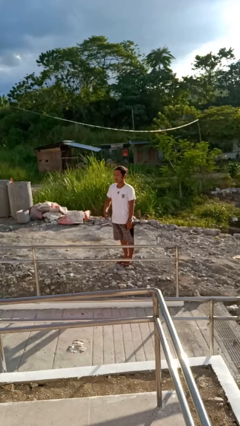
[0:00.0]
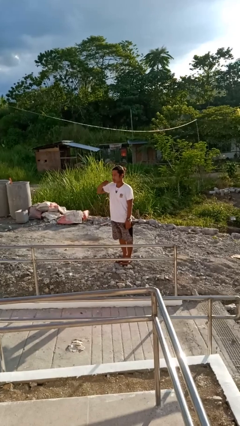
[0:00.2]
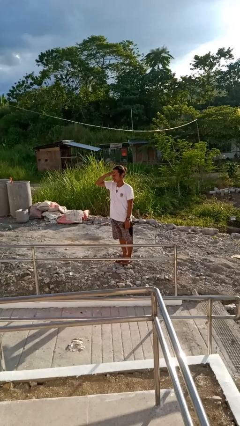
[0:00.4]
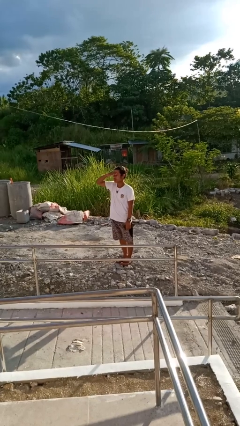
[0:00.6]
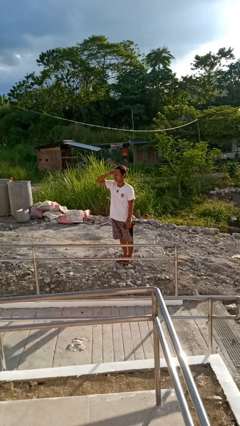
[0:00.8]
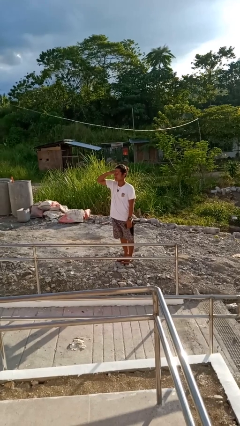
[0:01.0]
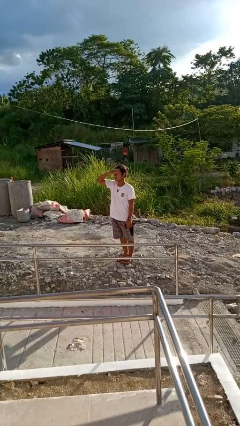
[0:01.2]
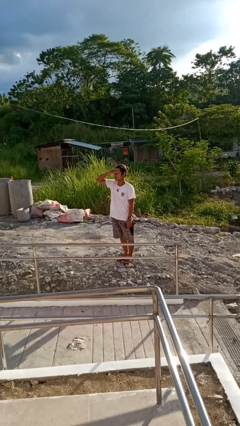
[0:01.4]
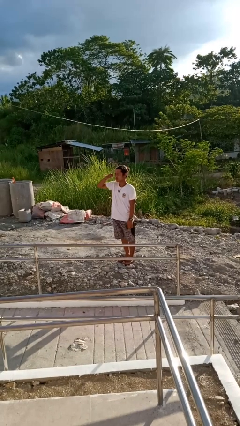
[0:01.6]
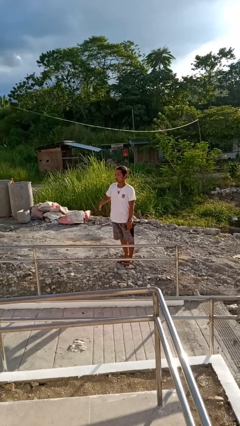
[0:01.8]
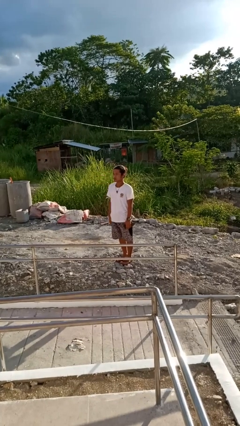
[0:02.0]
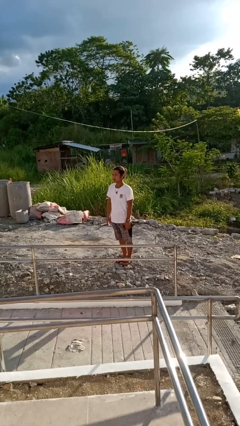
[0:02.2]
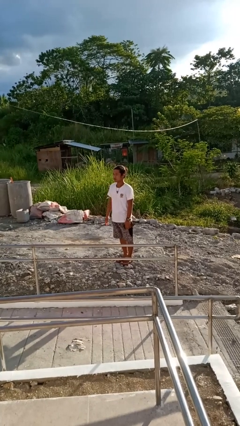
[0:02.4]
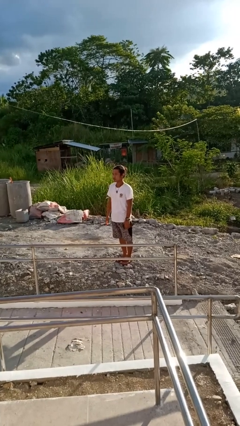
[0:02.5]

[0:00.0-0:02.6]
person shades eyes

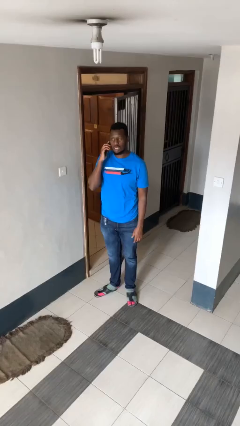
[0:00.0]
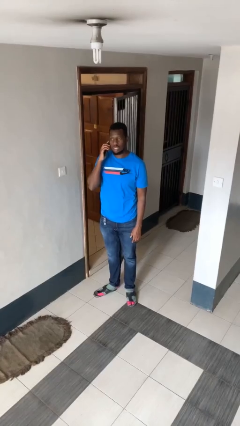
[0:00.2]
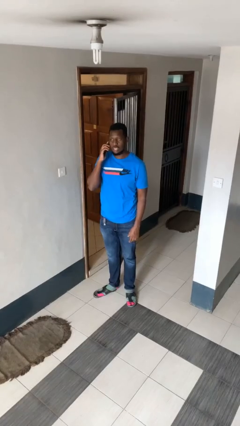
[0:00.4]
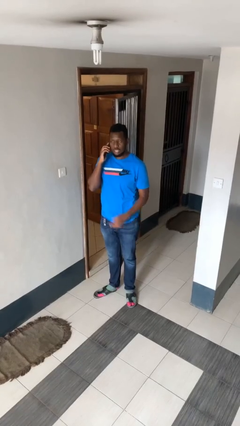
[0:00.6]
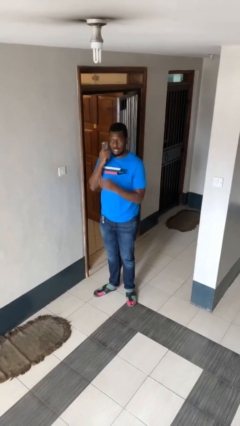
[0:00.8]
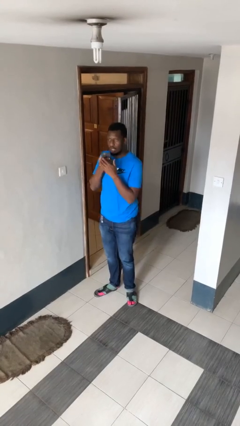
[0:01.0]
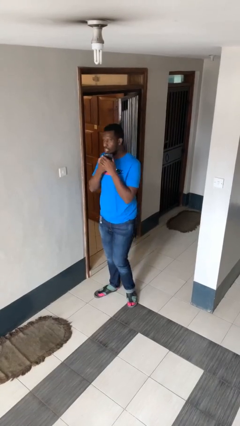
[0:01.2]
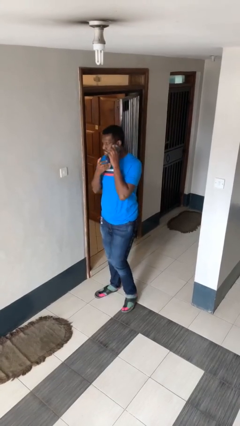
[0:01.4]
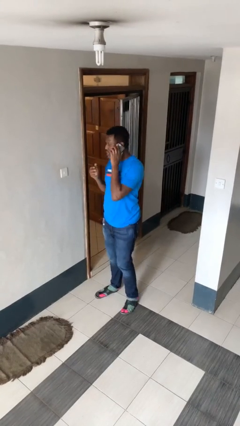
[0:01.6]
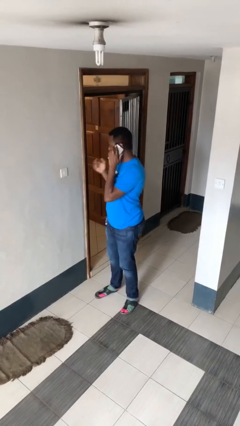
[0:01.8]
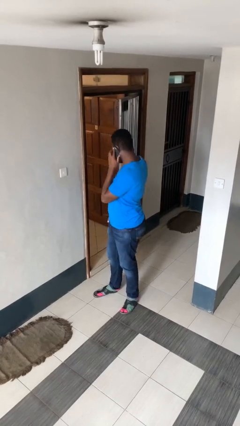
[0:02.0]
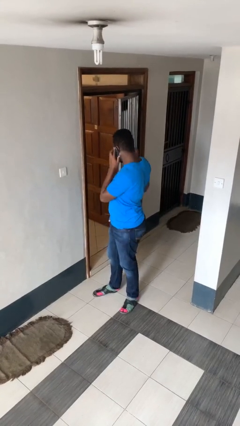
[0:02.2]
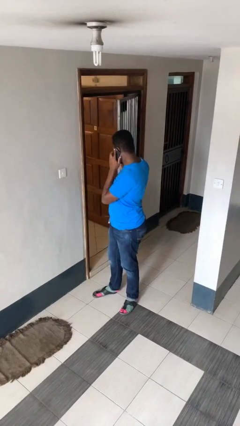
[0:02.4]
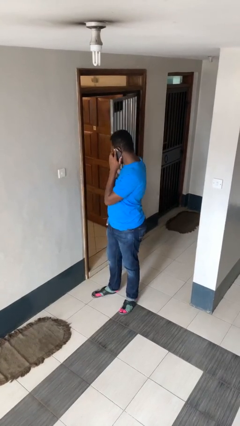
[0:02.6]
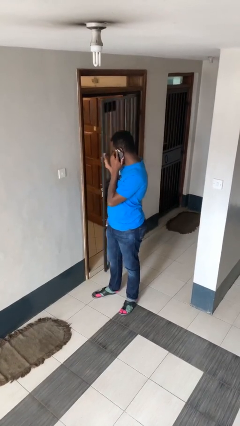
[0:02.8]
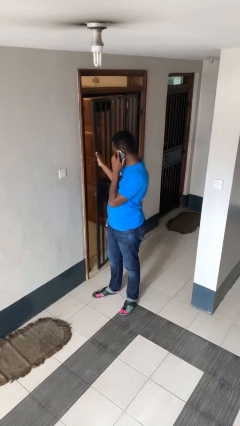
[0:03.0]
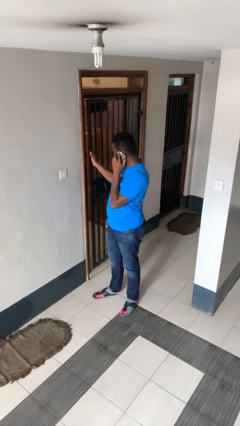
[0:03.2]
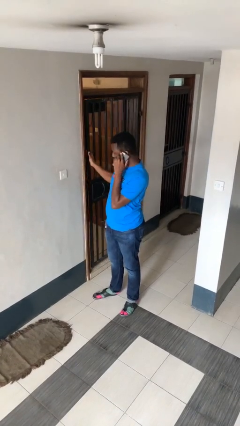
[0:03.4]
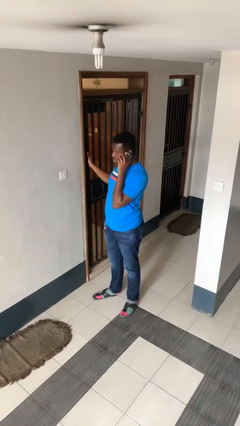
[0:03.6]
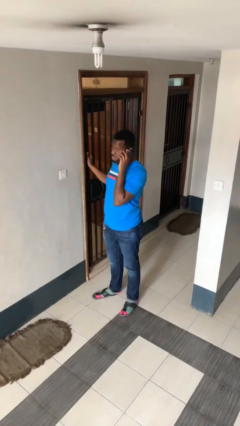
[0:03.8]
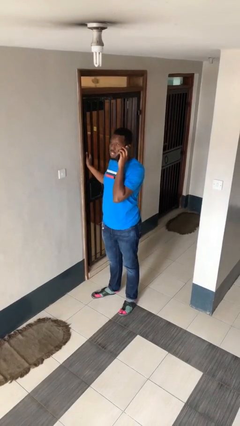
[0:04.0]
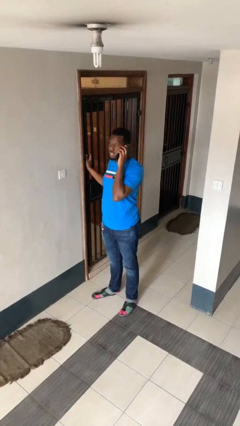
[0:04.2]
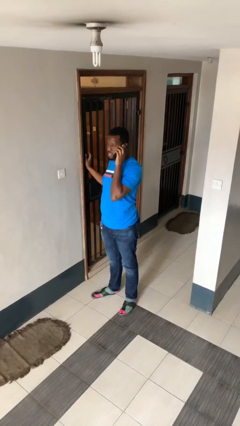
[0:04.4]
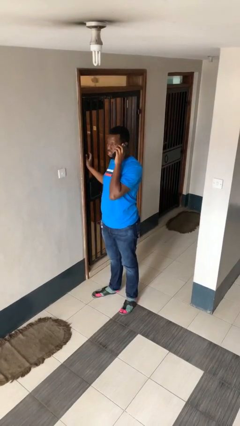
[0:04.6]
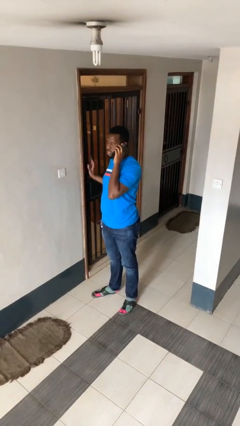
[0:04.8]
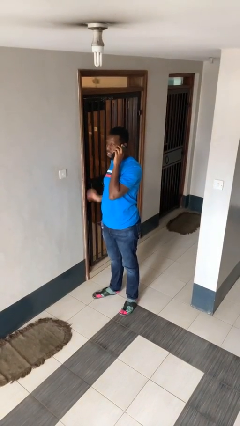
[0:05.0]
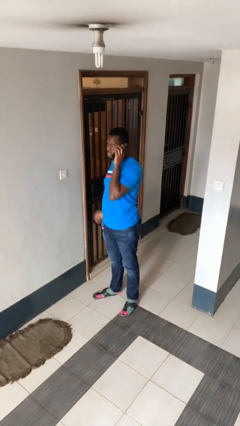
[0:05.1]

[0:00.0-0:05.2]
person closes facility door

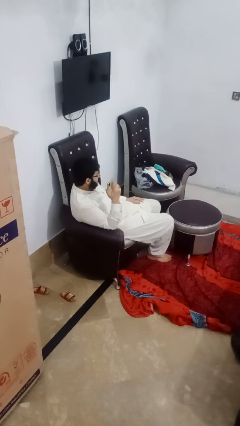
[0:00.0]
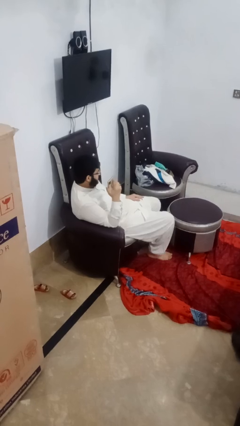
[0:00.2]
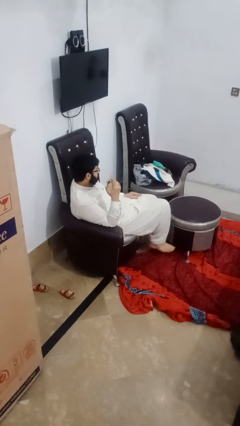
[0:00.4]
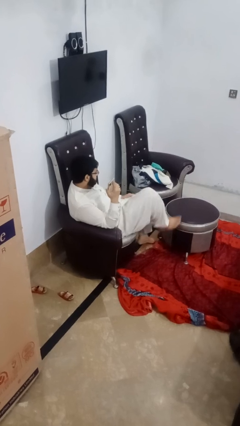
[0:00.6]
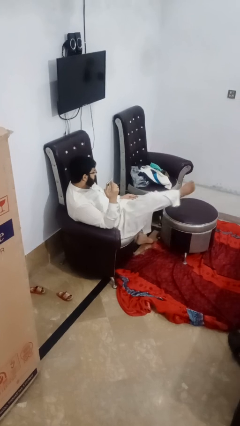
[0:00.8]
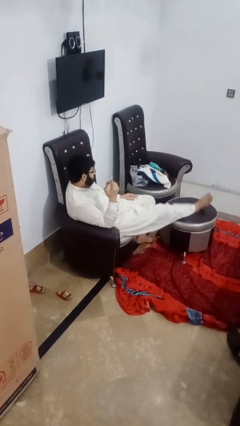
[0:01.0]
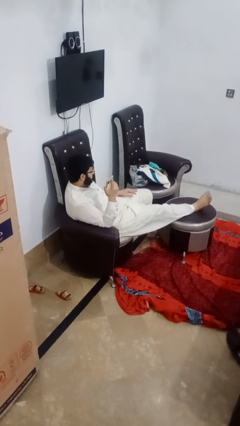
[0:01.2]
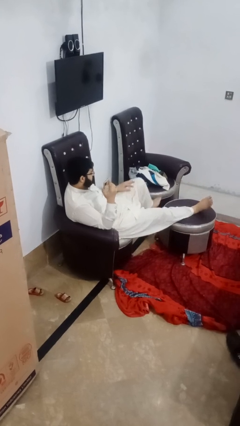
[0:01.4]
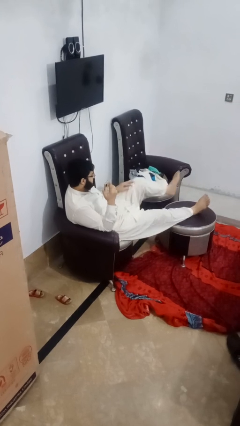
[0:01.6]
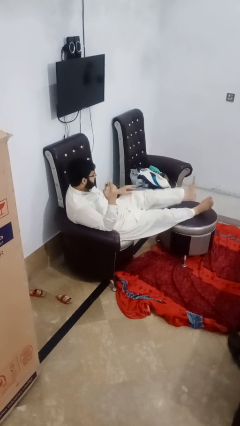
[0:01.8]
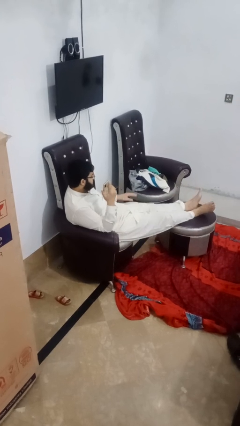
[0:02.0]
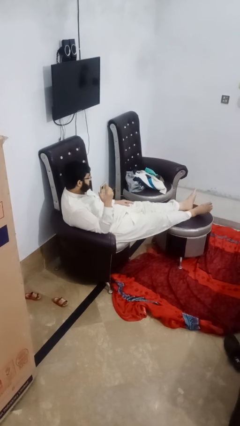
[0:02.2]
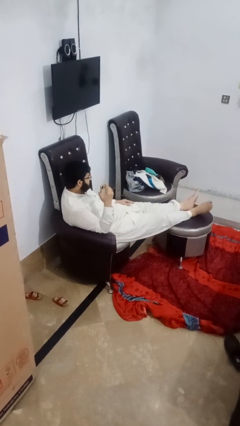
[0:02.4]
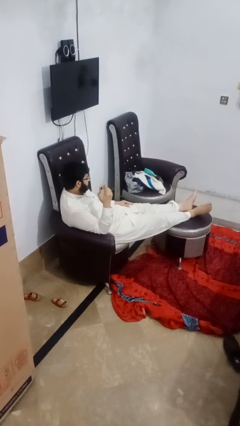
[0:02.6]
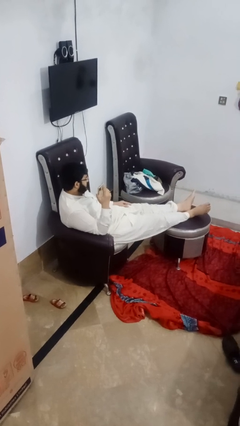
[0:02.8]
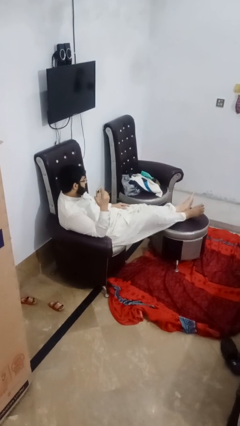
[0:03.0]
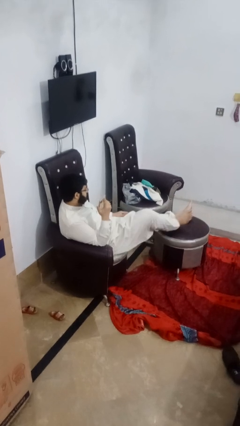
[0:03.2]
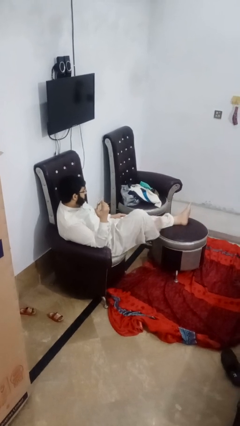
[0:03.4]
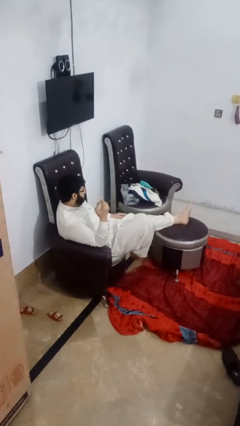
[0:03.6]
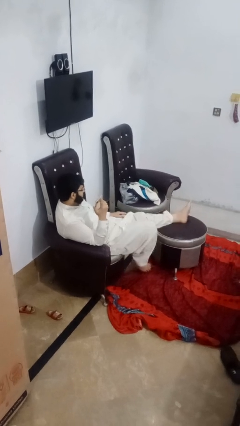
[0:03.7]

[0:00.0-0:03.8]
person puts feet up

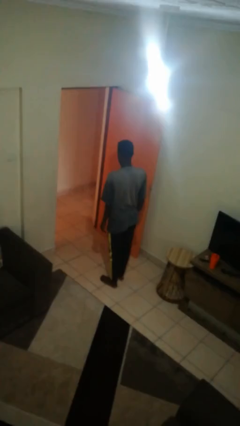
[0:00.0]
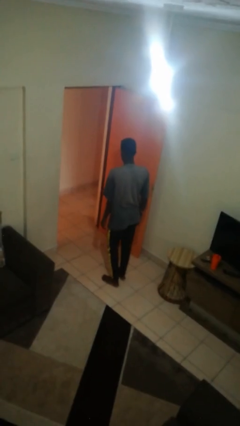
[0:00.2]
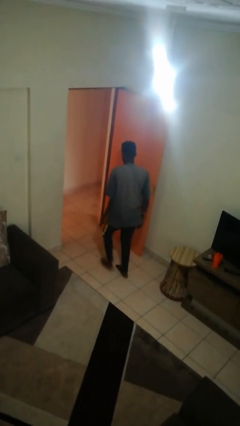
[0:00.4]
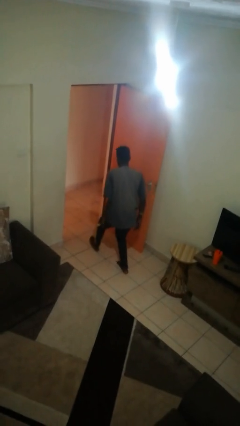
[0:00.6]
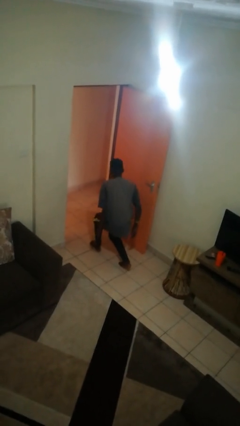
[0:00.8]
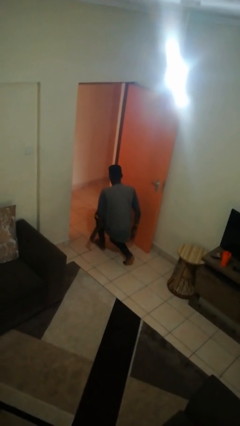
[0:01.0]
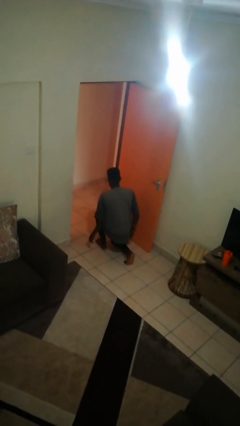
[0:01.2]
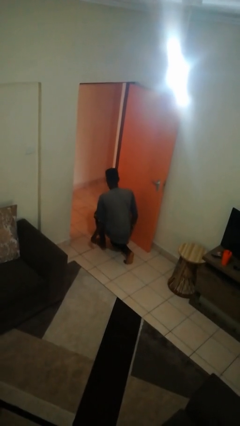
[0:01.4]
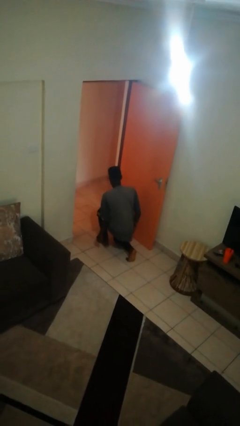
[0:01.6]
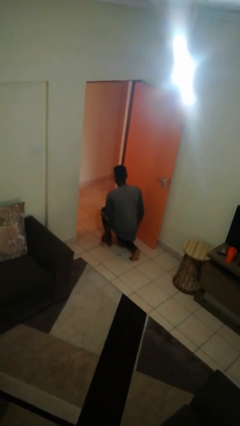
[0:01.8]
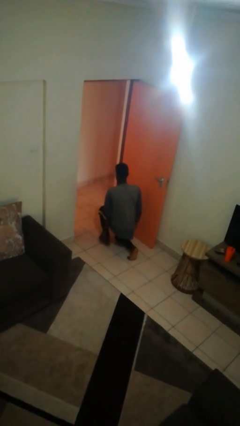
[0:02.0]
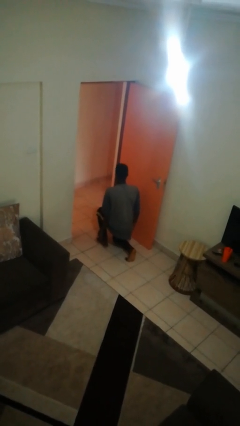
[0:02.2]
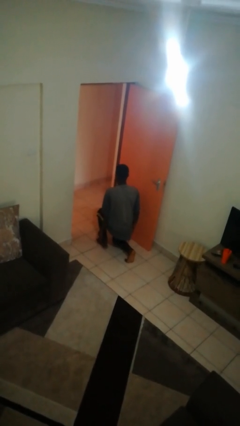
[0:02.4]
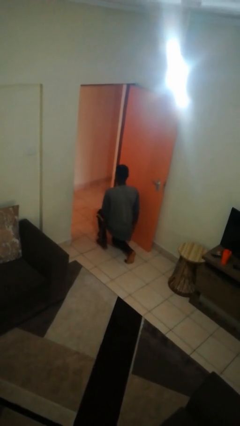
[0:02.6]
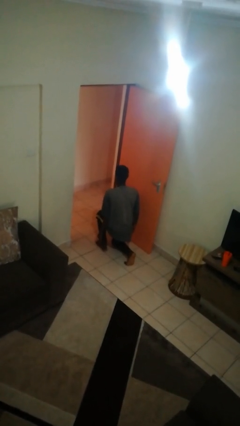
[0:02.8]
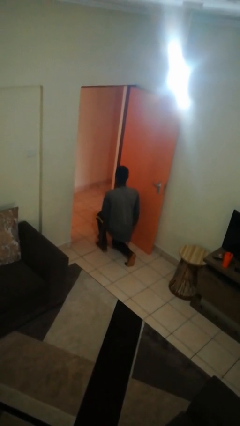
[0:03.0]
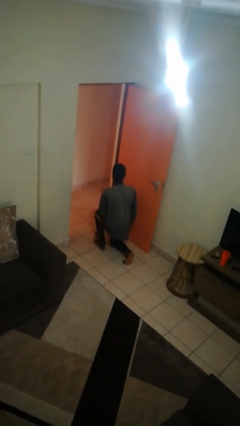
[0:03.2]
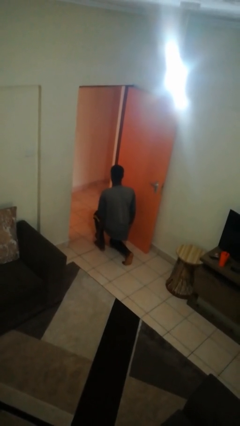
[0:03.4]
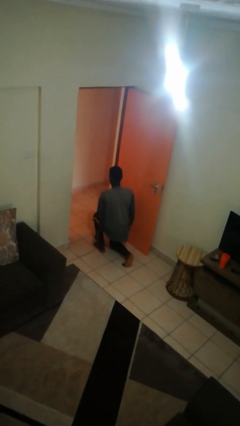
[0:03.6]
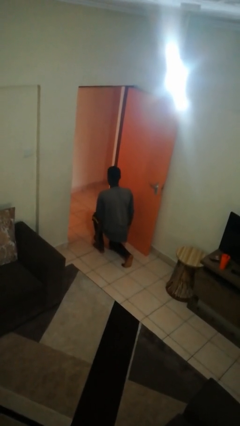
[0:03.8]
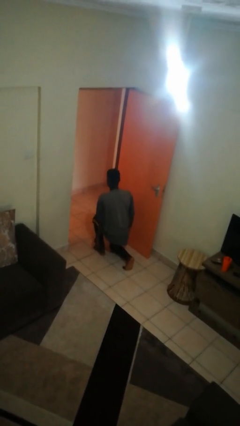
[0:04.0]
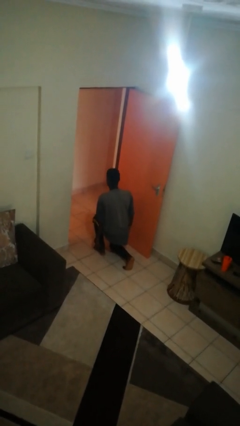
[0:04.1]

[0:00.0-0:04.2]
person kneels

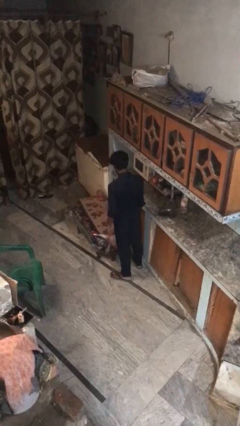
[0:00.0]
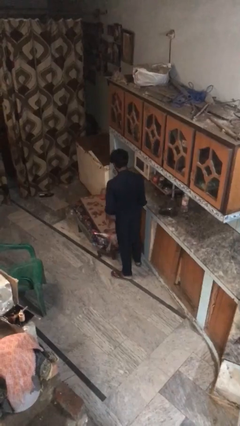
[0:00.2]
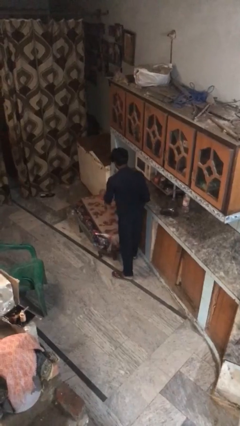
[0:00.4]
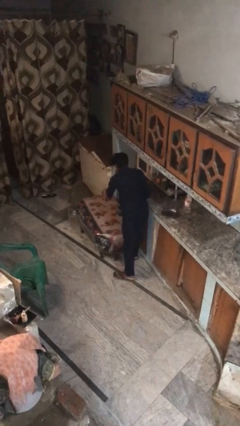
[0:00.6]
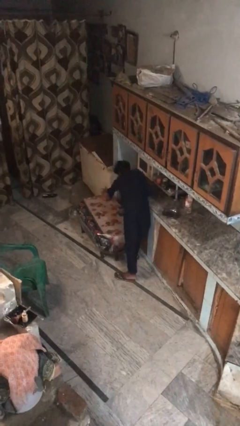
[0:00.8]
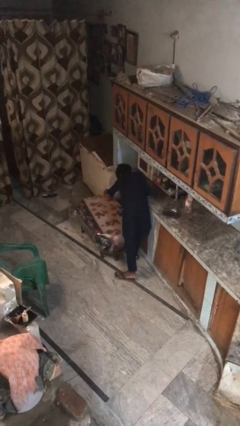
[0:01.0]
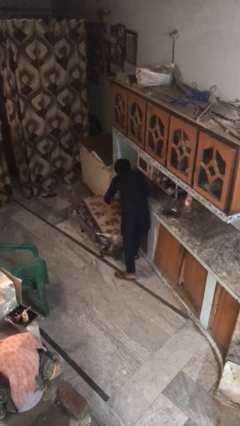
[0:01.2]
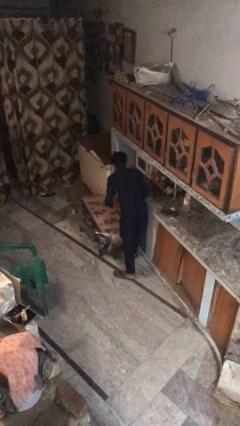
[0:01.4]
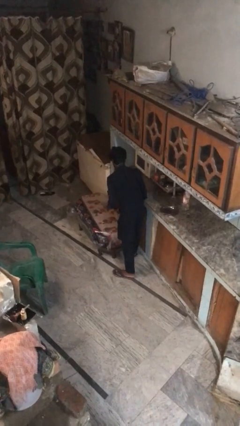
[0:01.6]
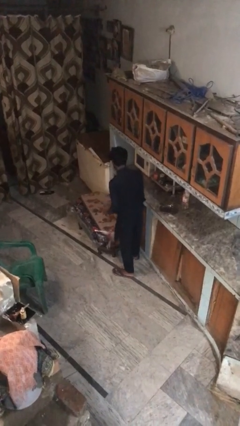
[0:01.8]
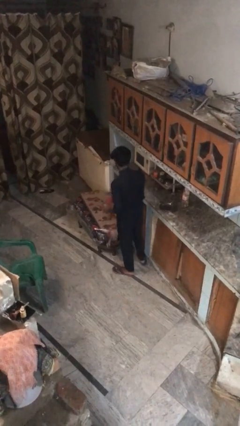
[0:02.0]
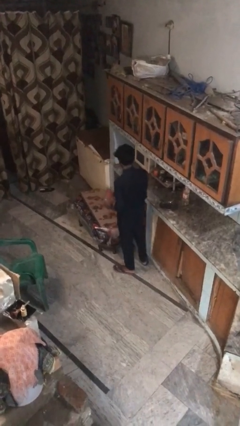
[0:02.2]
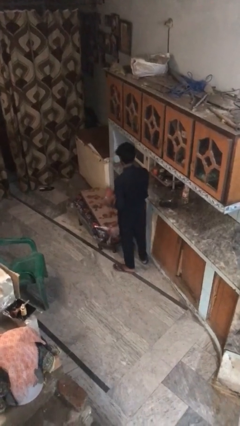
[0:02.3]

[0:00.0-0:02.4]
person picks up object from table
